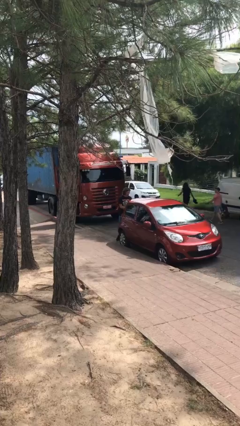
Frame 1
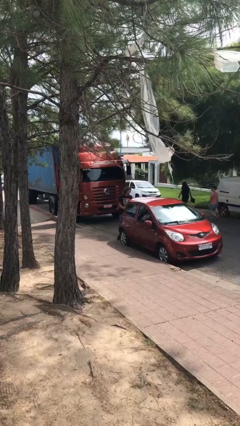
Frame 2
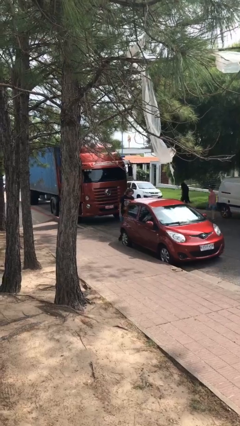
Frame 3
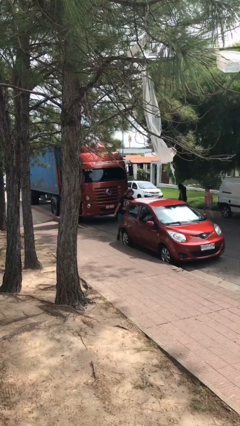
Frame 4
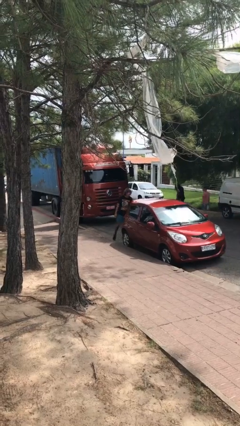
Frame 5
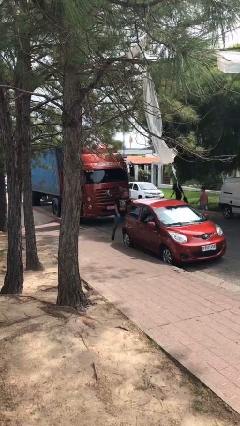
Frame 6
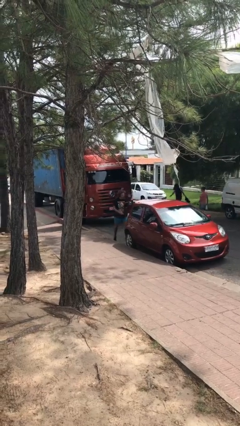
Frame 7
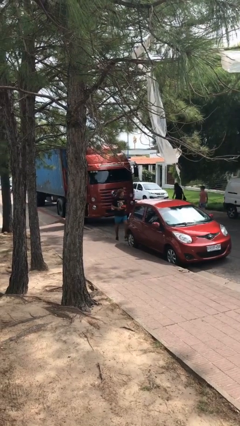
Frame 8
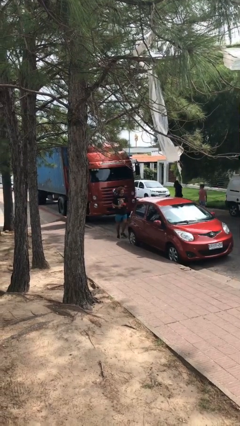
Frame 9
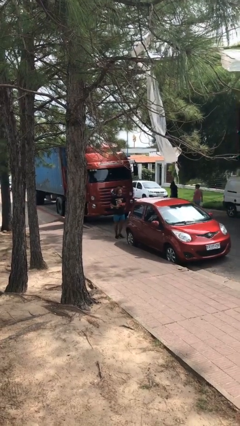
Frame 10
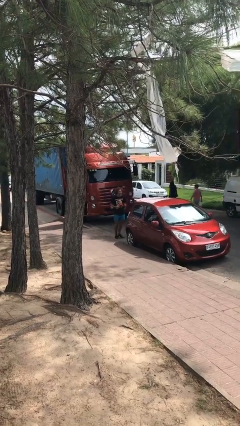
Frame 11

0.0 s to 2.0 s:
person unloads car

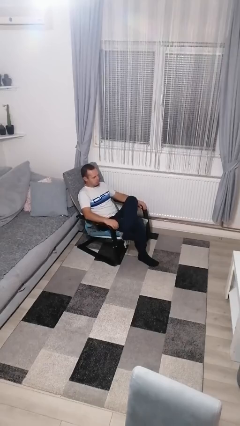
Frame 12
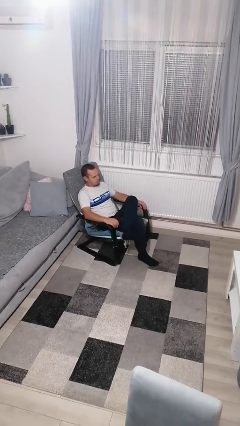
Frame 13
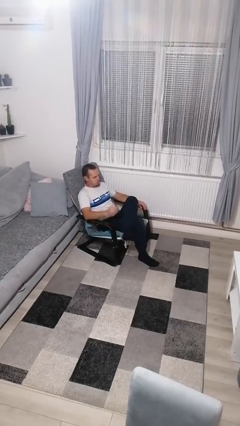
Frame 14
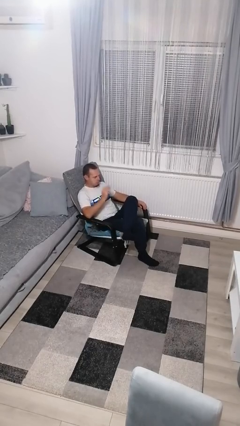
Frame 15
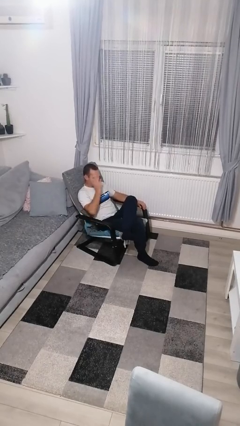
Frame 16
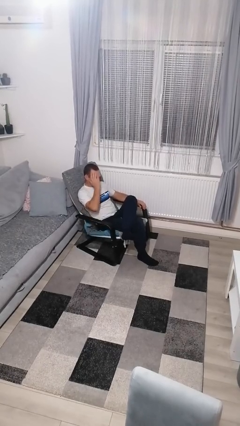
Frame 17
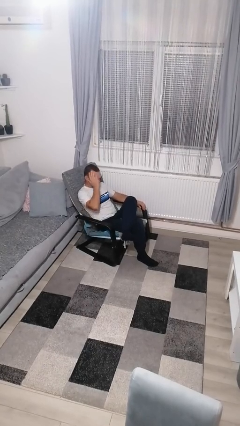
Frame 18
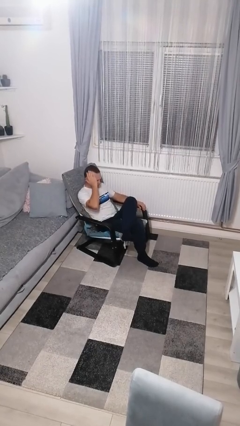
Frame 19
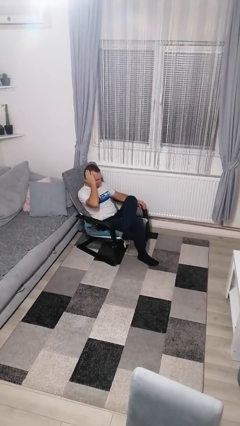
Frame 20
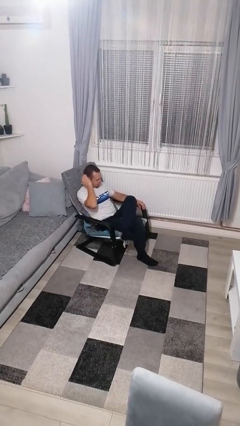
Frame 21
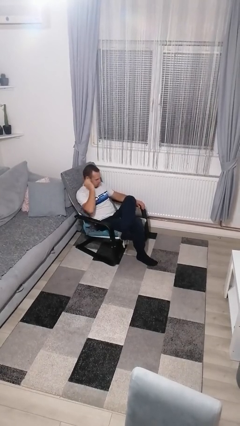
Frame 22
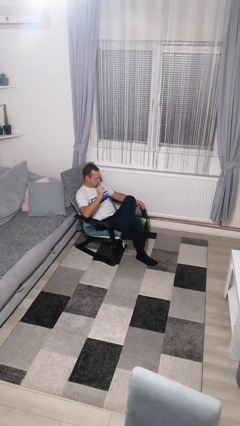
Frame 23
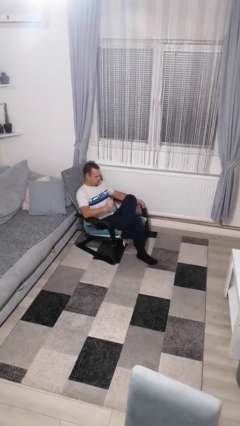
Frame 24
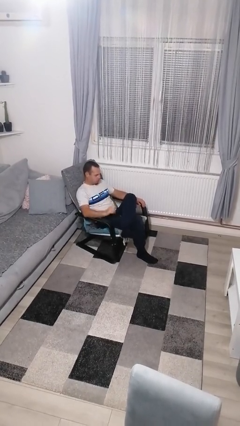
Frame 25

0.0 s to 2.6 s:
person strokes hair

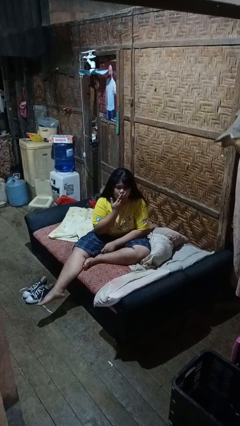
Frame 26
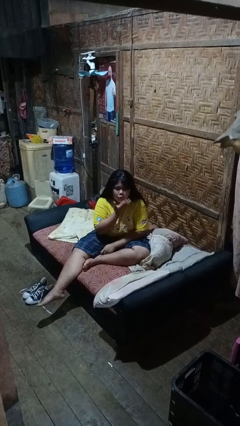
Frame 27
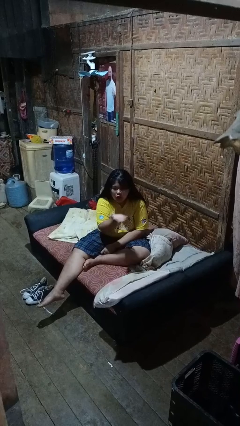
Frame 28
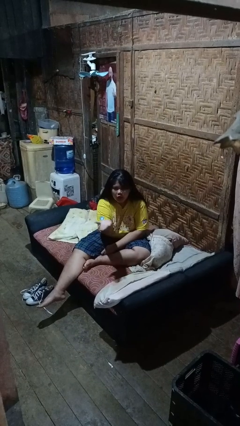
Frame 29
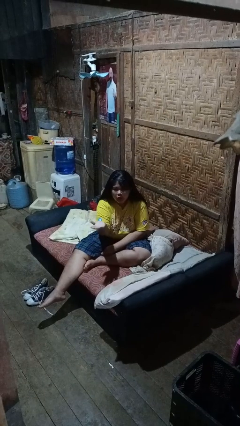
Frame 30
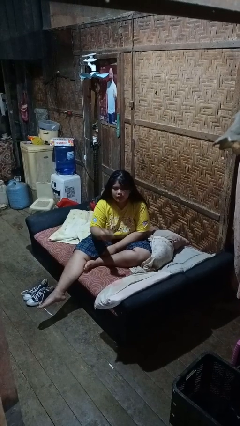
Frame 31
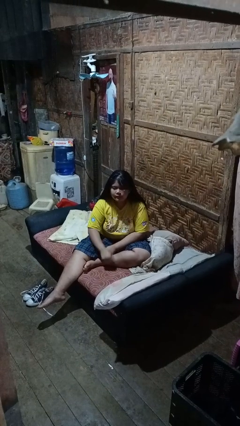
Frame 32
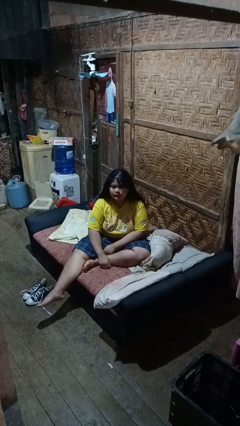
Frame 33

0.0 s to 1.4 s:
person gestures blow kiss

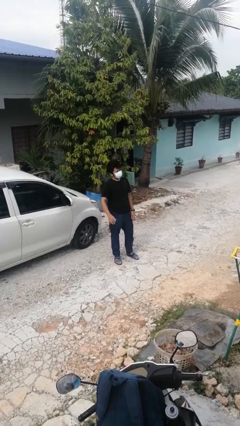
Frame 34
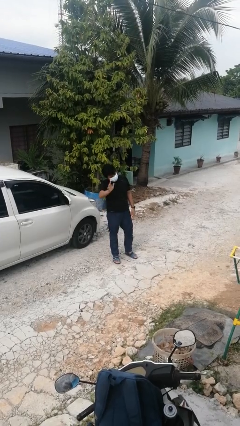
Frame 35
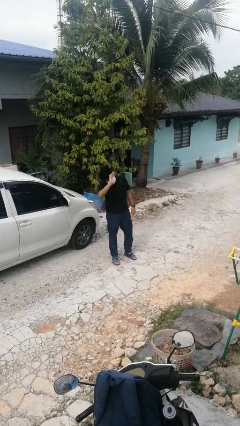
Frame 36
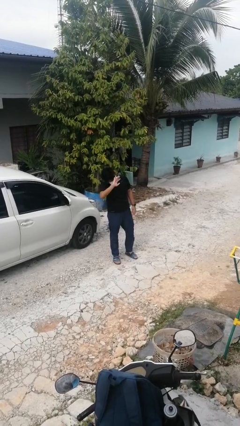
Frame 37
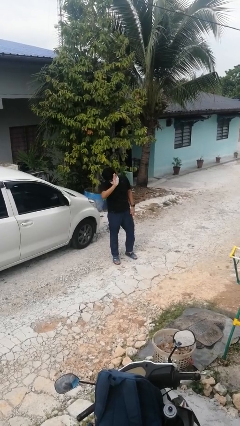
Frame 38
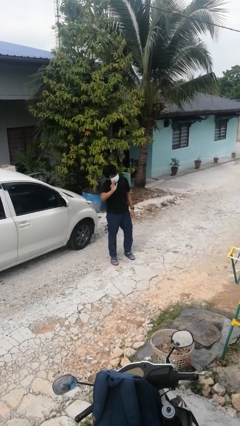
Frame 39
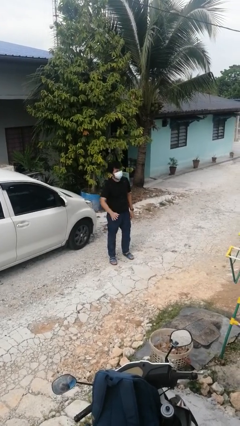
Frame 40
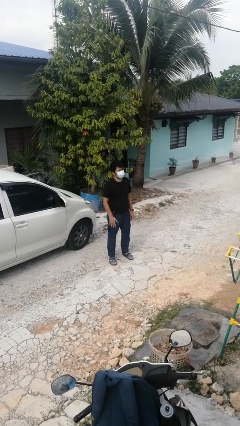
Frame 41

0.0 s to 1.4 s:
person waves at person

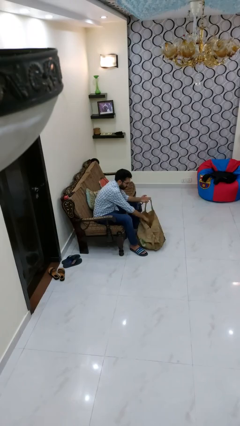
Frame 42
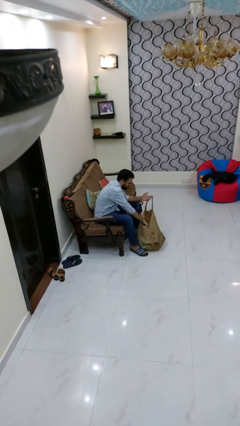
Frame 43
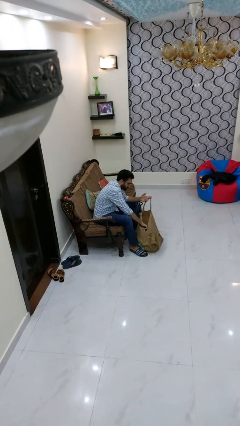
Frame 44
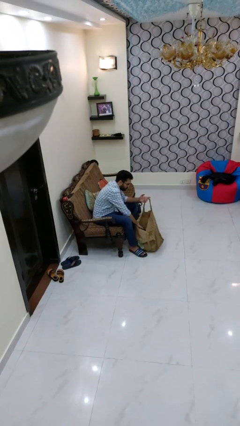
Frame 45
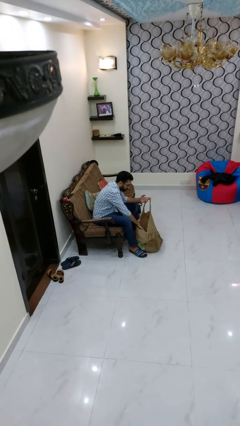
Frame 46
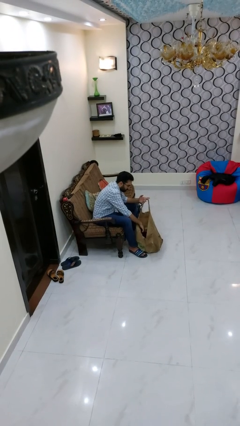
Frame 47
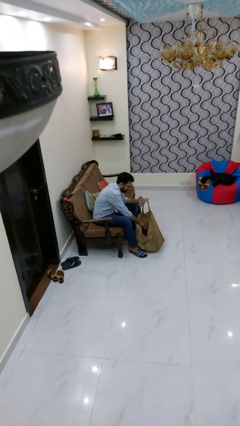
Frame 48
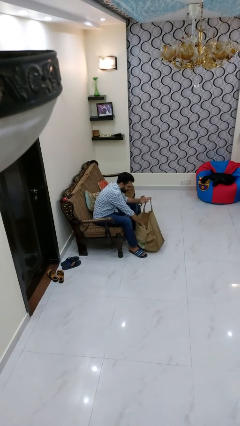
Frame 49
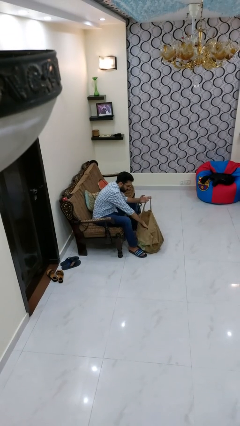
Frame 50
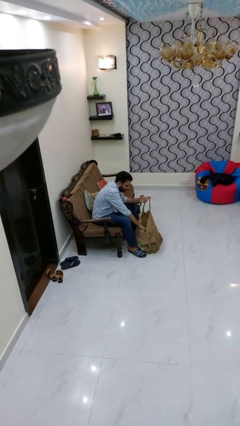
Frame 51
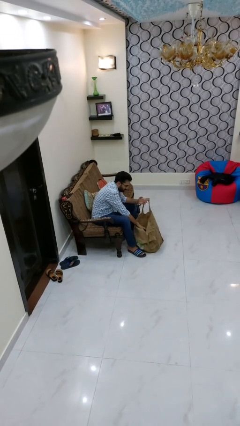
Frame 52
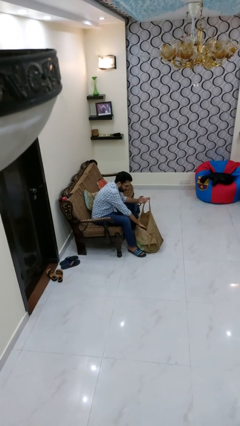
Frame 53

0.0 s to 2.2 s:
person searches in bag

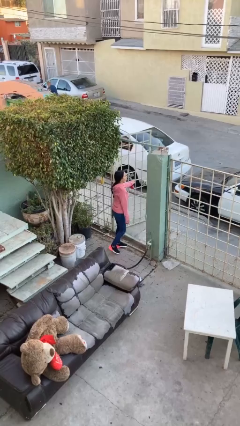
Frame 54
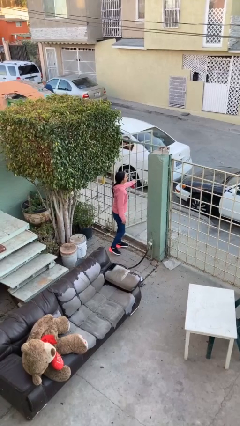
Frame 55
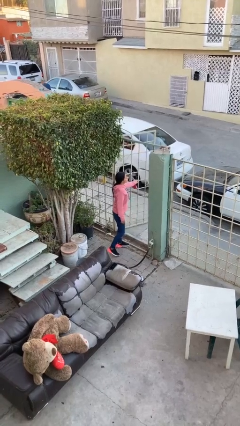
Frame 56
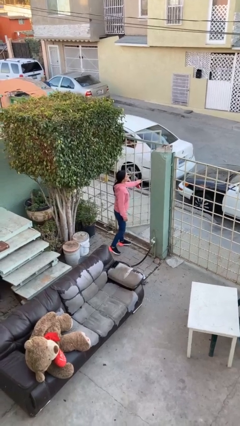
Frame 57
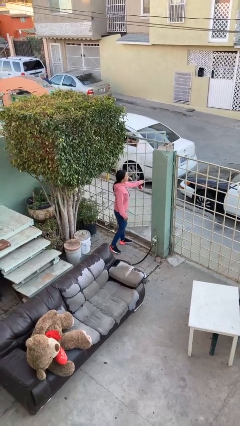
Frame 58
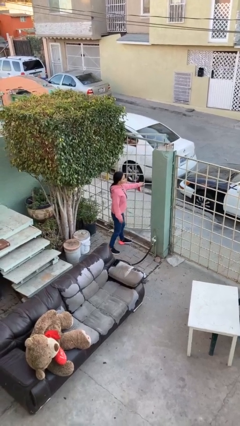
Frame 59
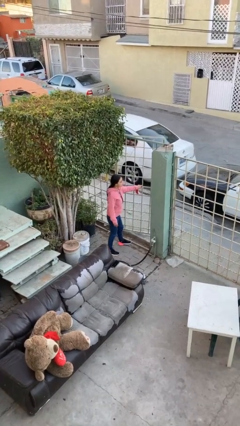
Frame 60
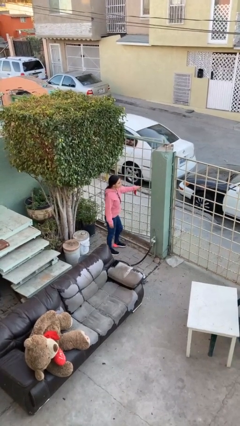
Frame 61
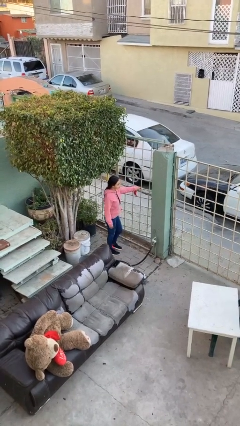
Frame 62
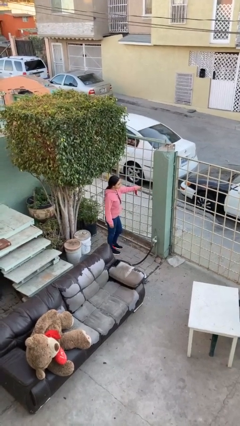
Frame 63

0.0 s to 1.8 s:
person closes facility door

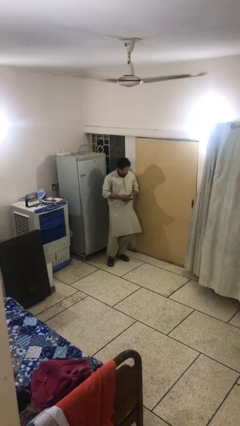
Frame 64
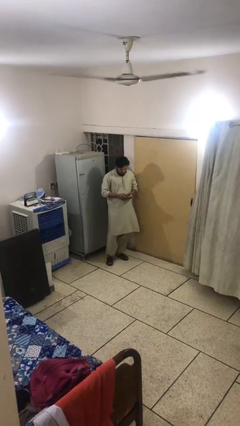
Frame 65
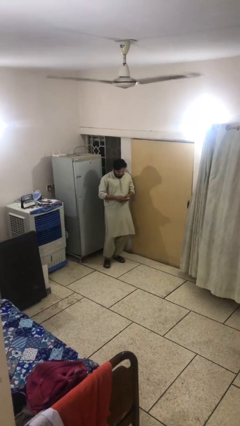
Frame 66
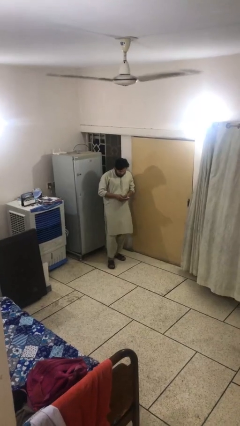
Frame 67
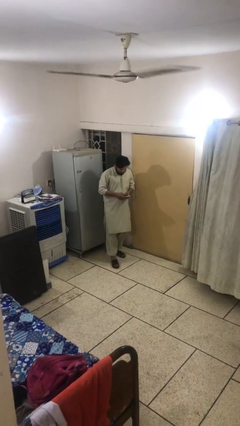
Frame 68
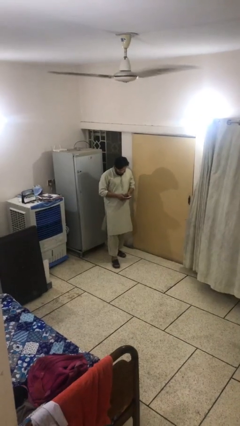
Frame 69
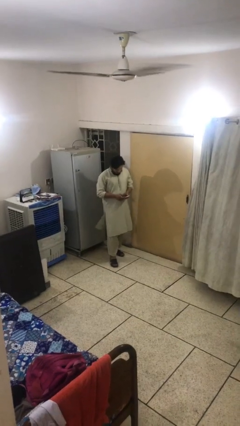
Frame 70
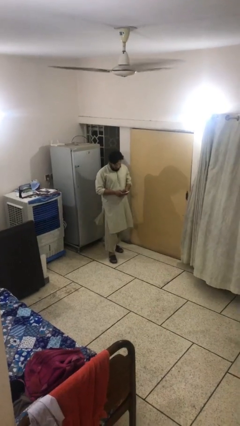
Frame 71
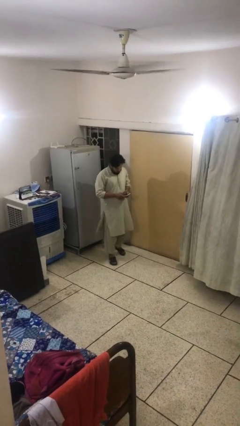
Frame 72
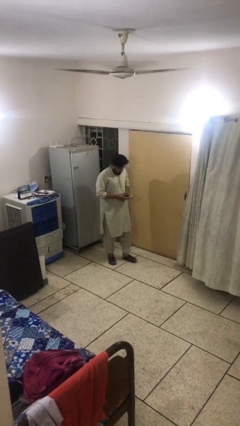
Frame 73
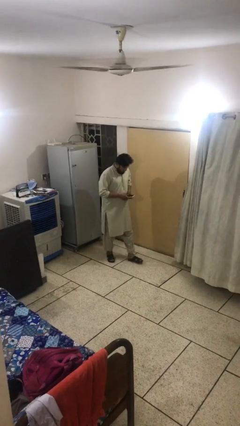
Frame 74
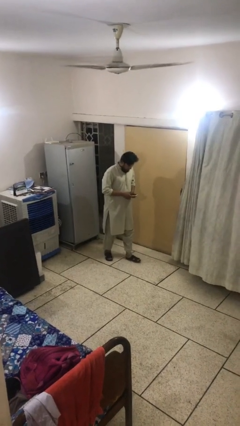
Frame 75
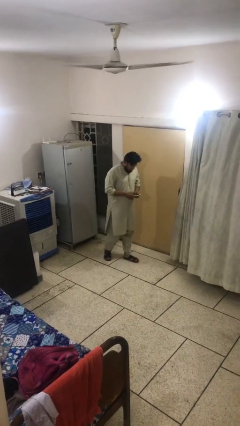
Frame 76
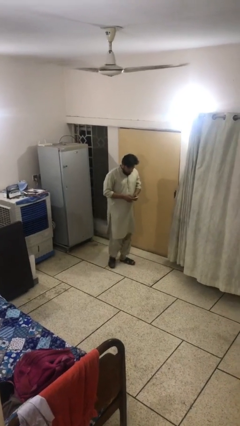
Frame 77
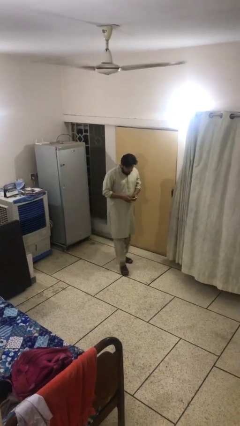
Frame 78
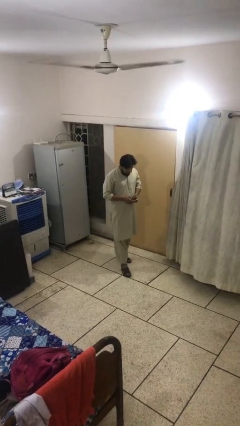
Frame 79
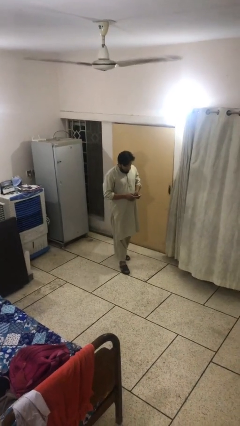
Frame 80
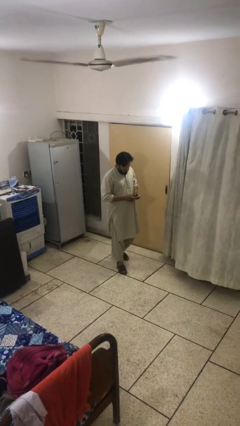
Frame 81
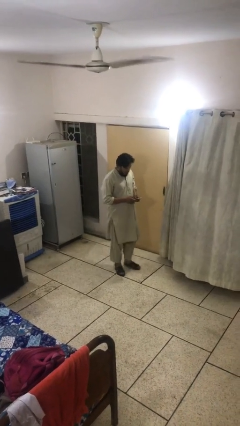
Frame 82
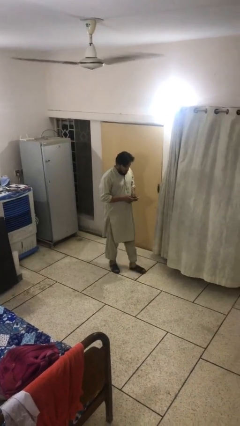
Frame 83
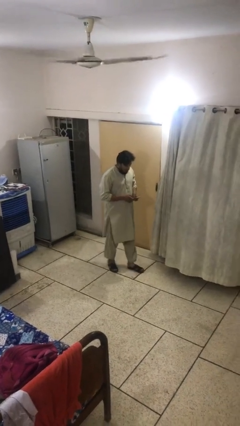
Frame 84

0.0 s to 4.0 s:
person texts on phone

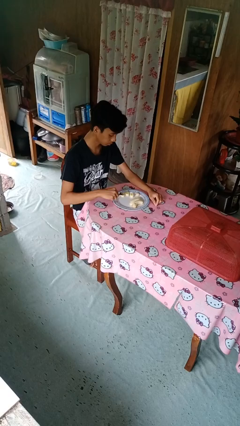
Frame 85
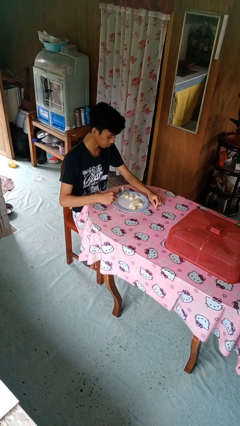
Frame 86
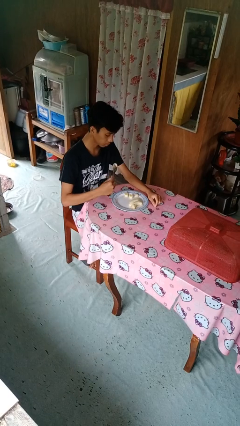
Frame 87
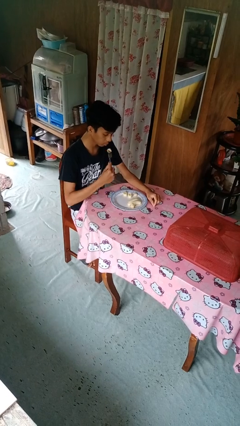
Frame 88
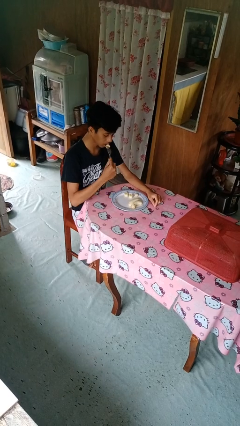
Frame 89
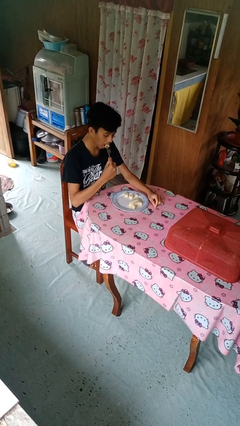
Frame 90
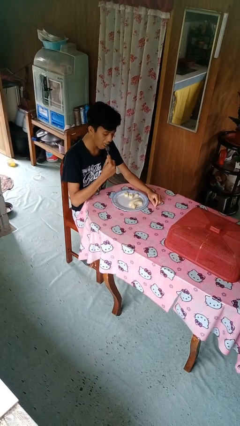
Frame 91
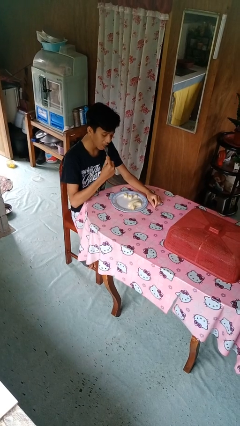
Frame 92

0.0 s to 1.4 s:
person eats with utensil

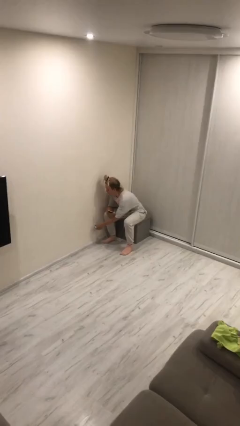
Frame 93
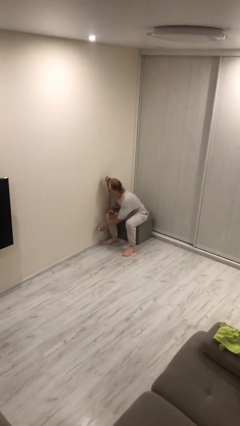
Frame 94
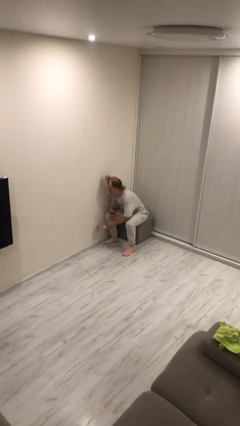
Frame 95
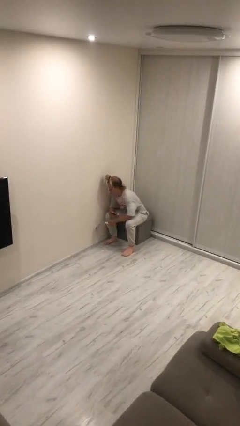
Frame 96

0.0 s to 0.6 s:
person unplugs from electrical socket
